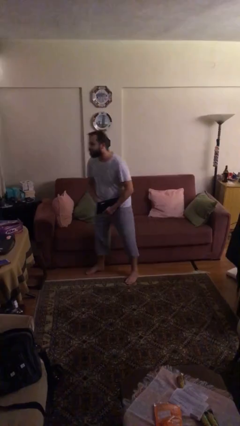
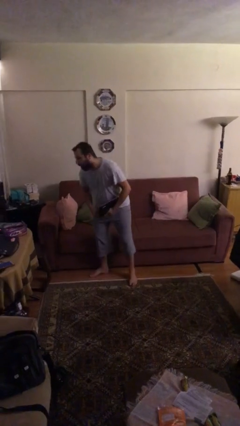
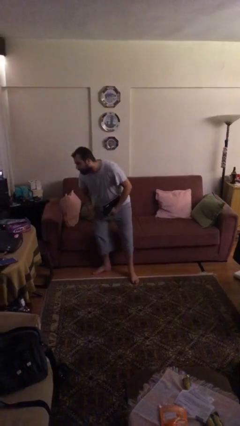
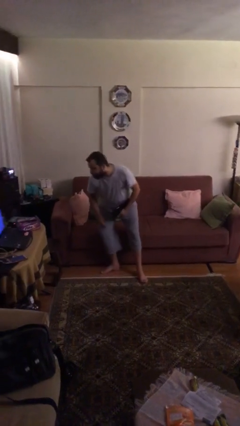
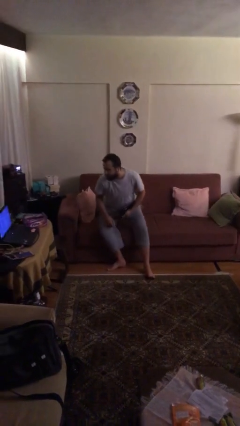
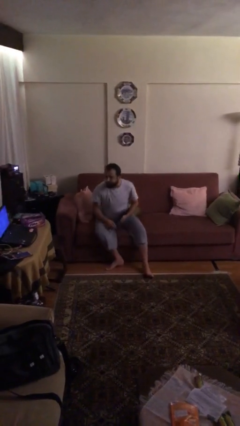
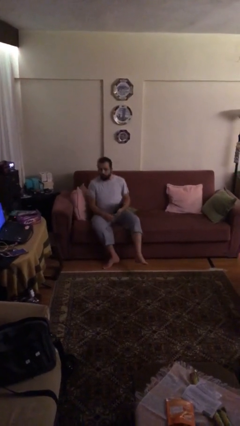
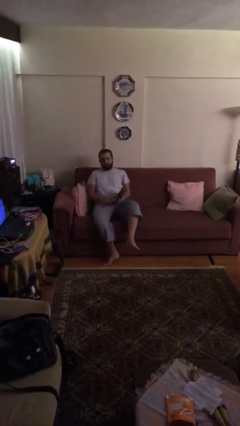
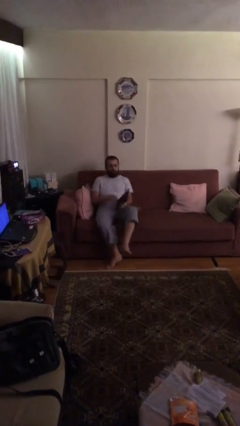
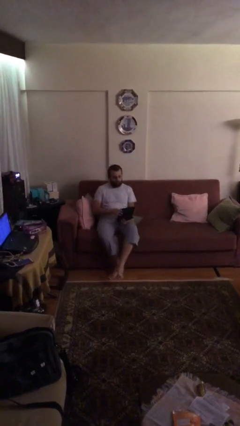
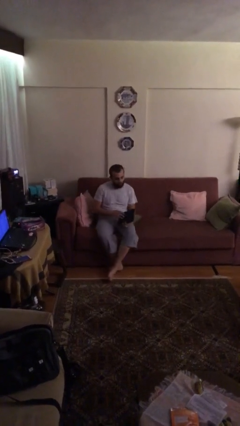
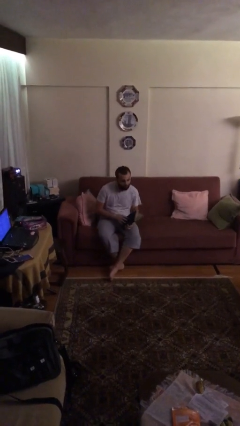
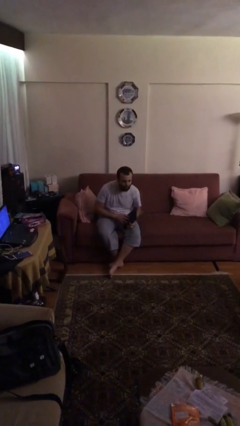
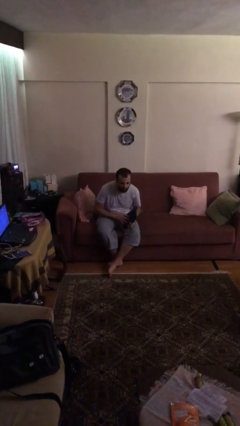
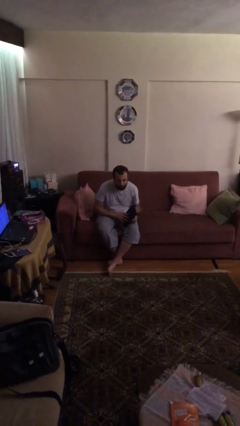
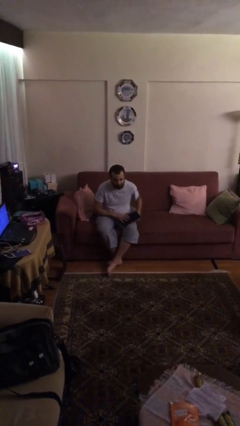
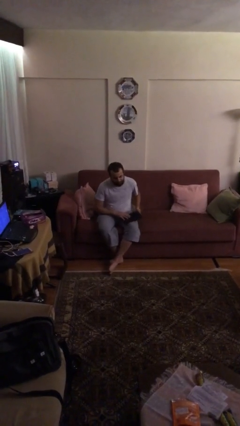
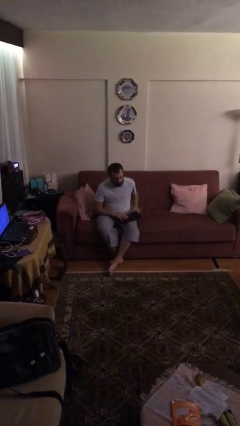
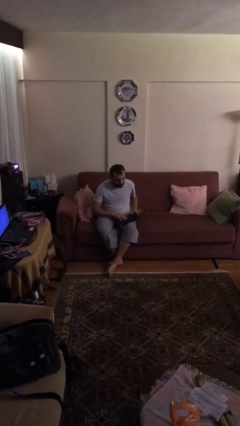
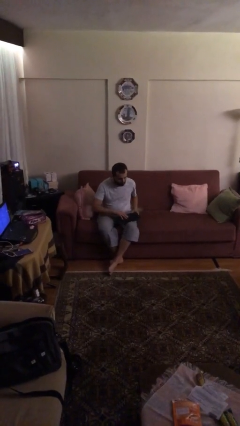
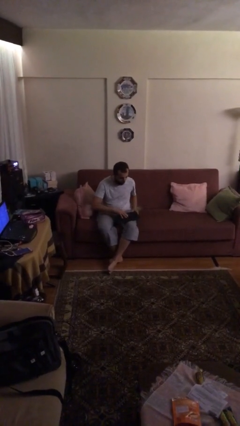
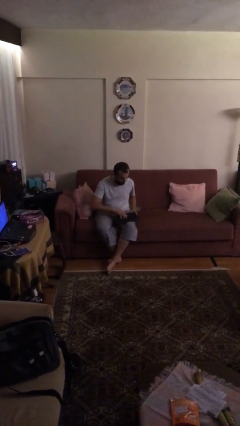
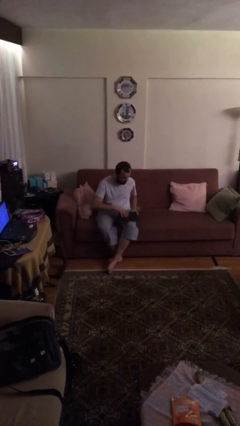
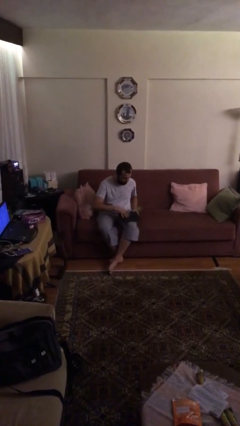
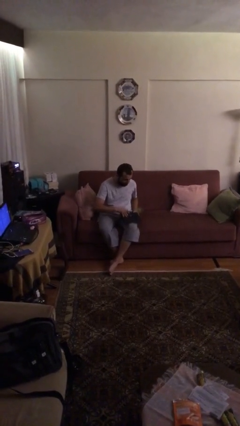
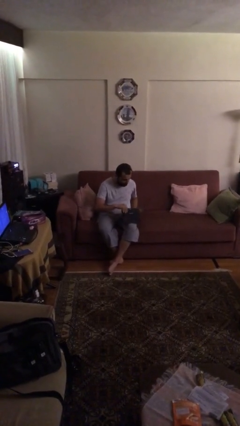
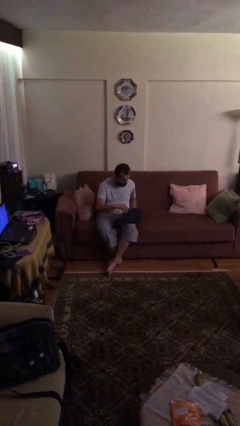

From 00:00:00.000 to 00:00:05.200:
person sits down

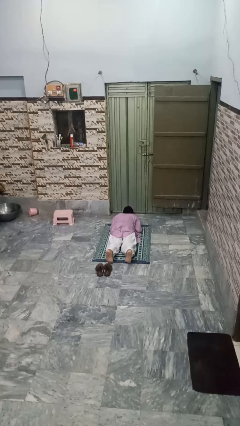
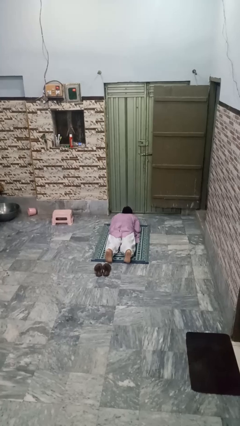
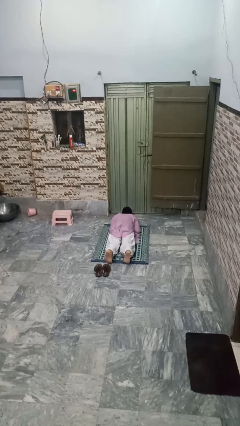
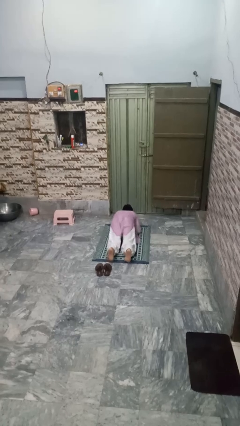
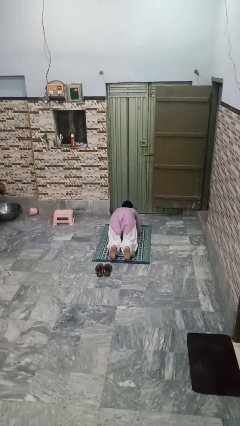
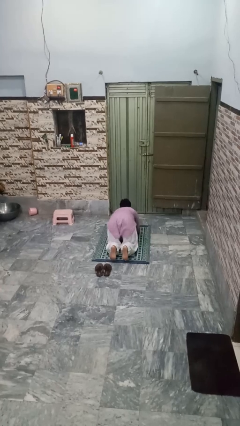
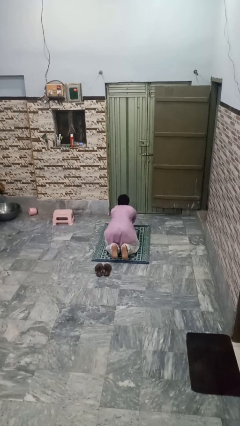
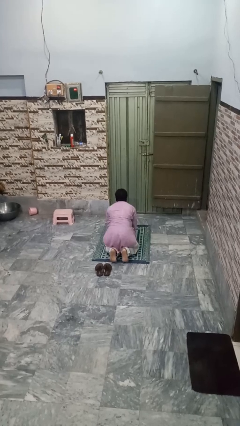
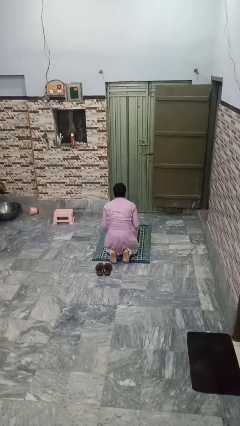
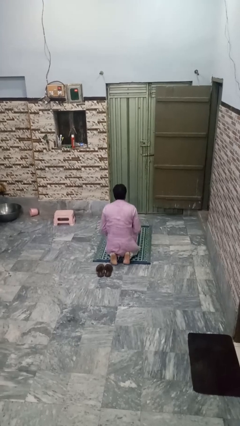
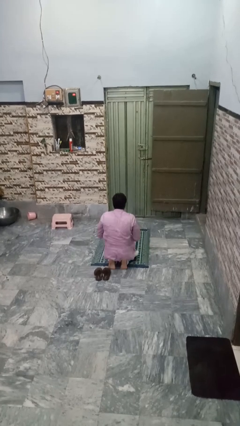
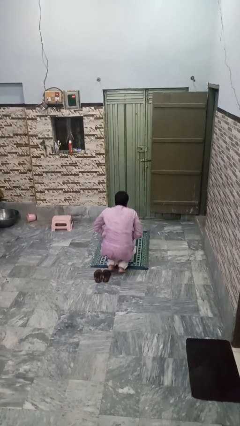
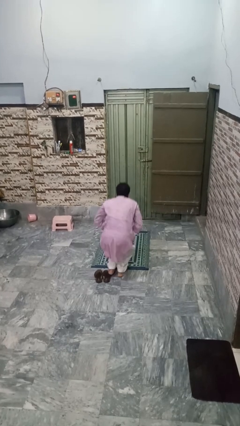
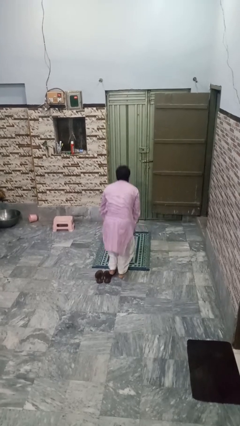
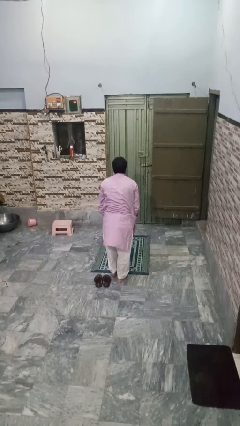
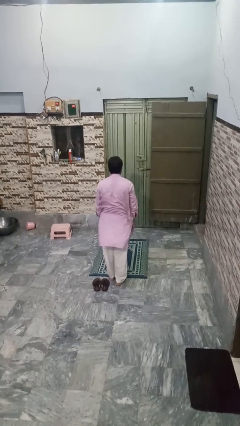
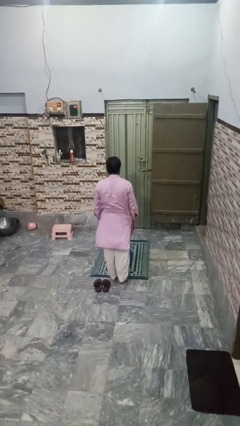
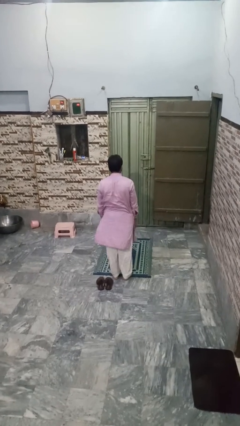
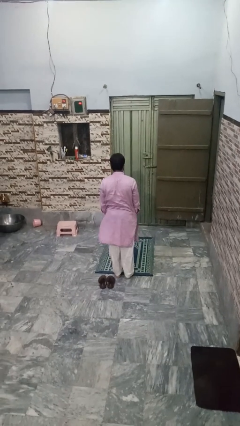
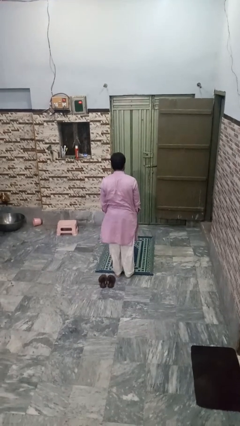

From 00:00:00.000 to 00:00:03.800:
person stands up from floor

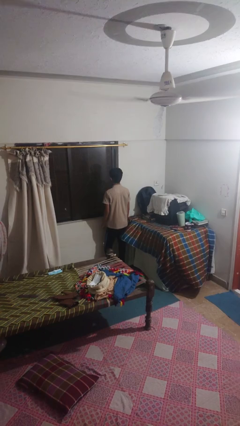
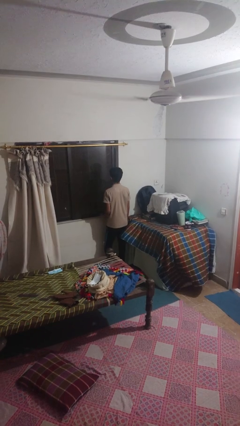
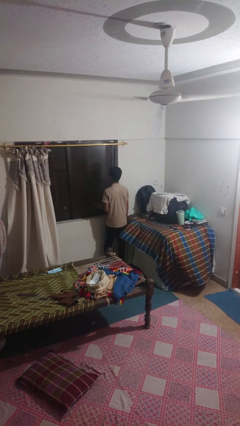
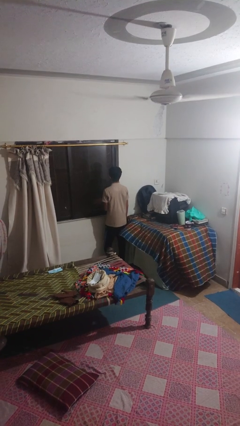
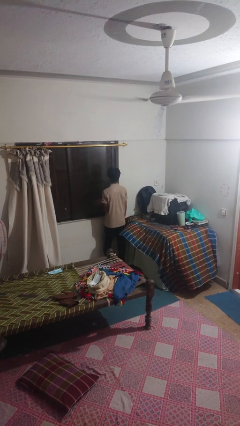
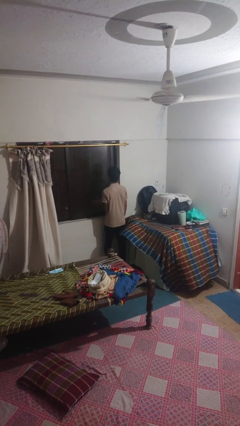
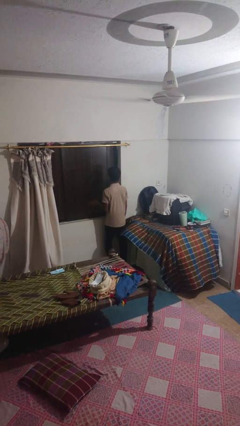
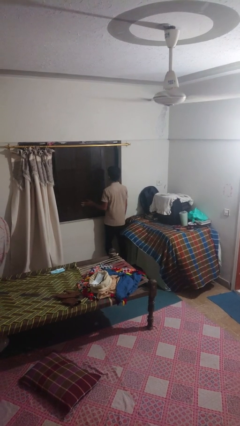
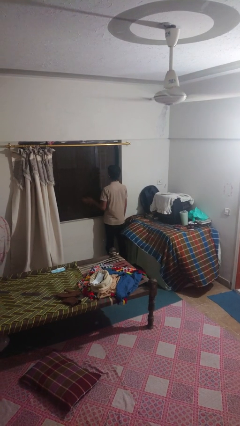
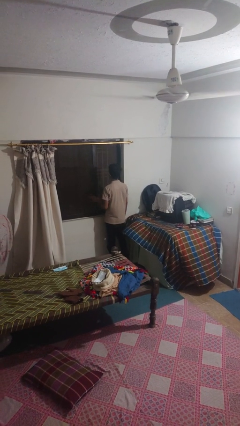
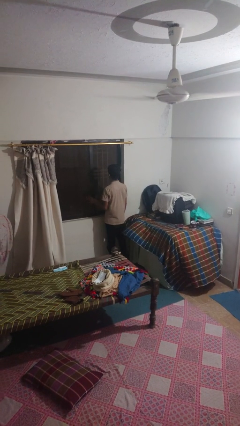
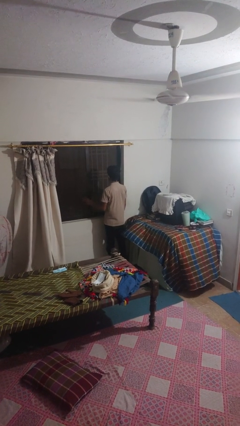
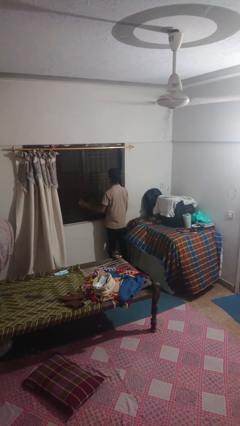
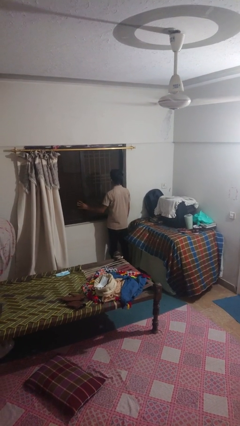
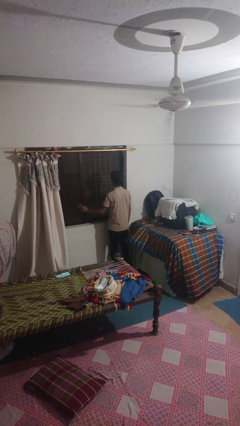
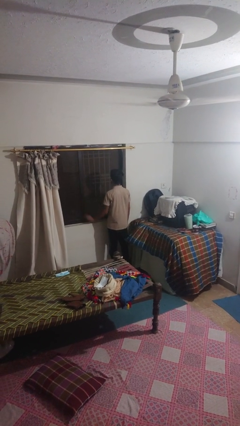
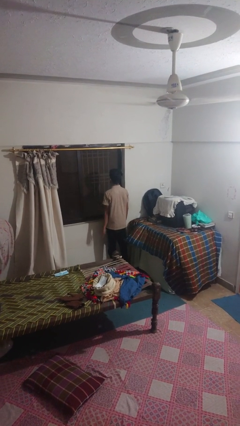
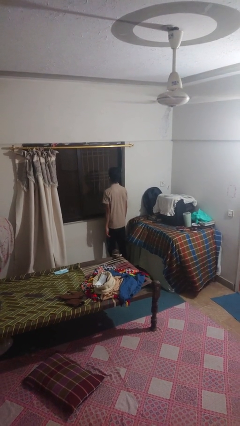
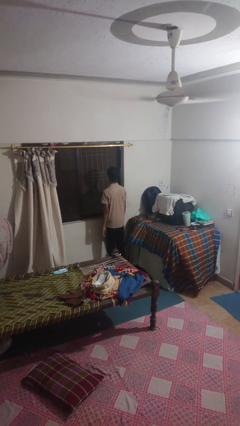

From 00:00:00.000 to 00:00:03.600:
person opens sliding door

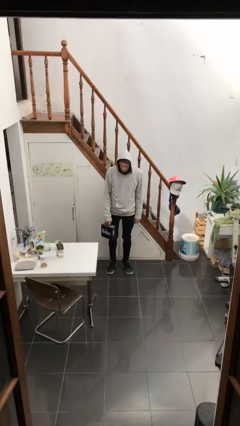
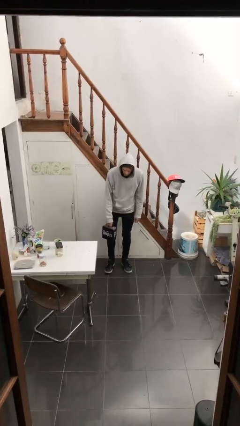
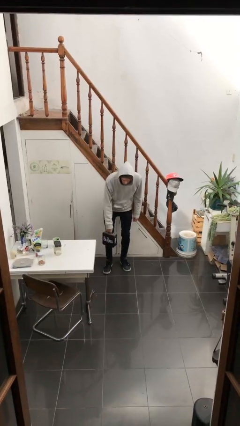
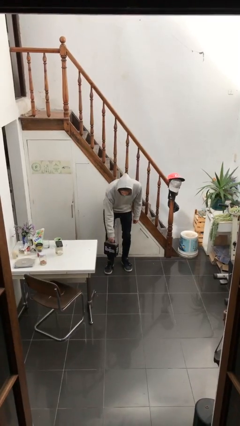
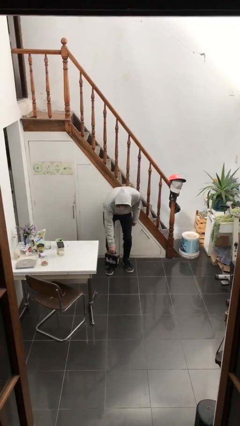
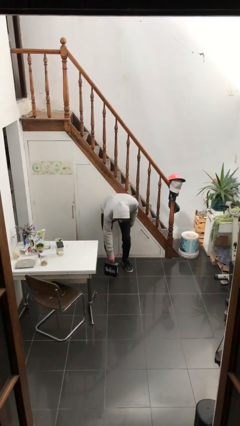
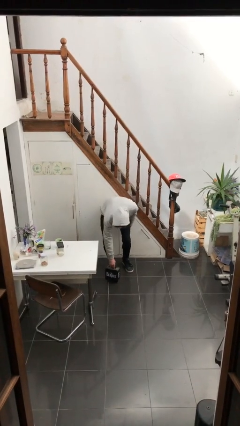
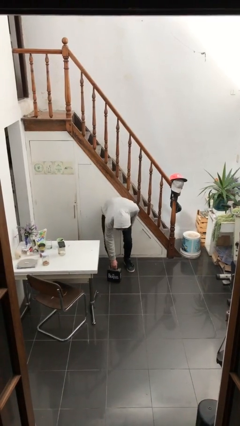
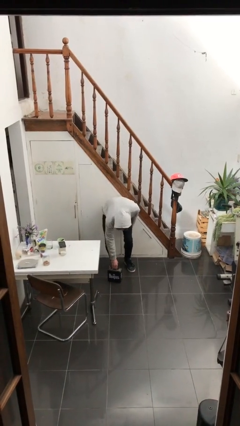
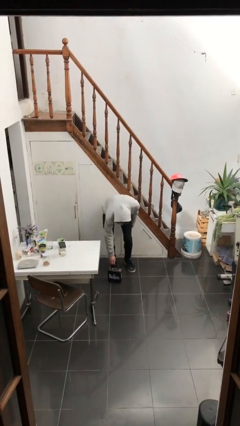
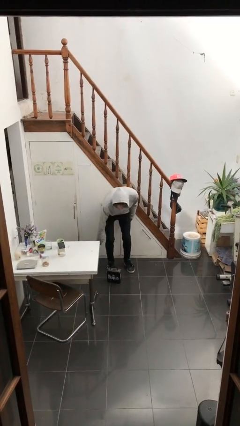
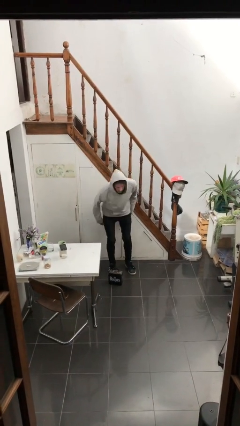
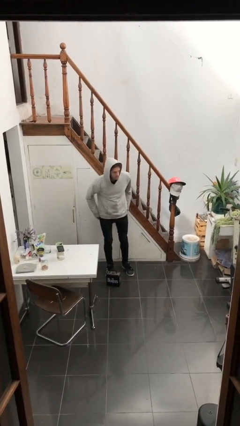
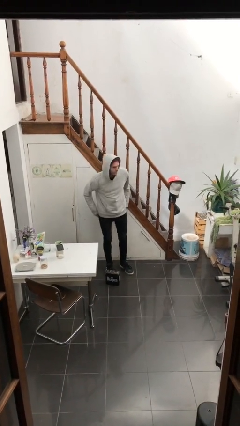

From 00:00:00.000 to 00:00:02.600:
person puts down object on floor

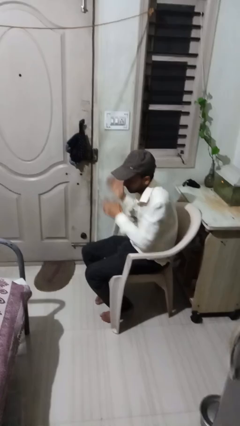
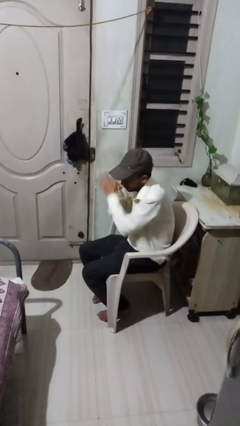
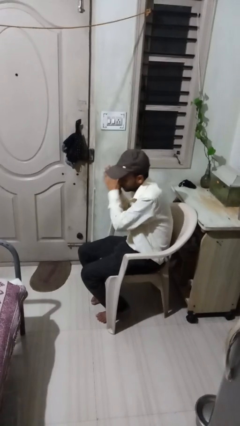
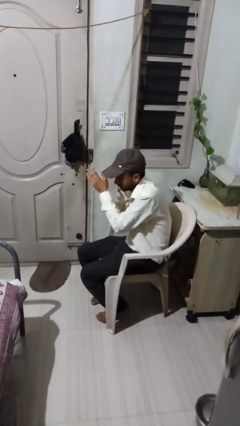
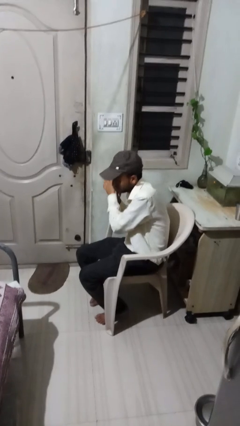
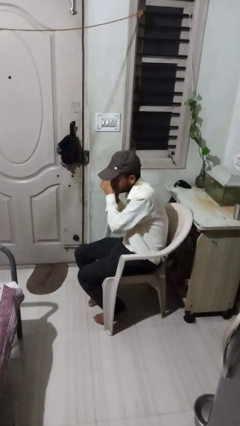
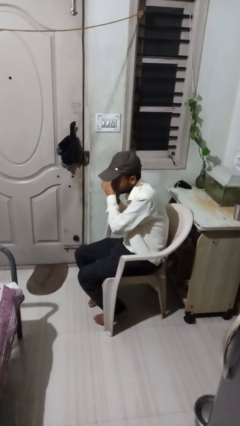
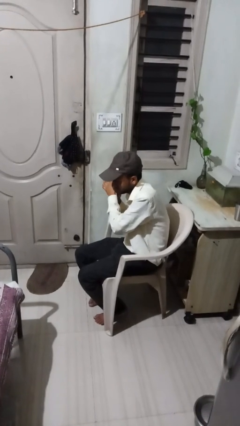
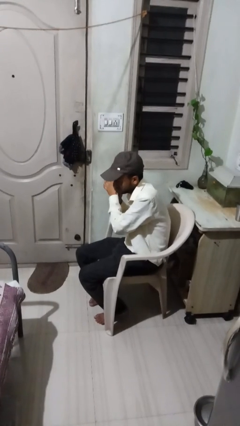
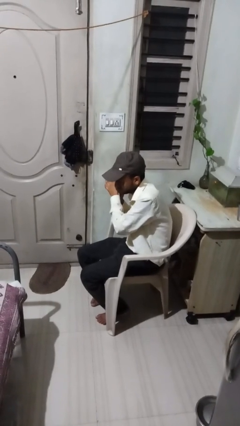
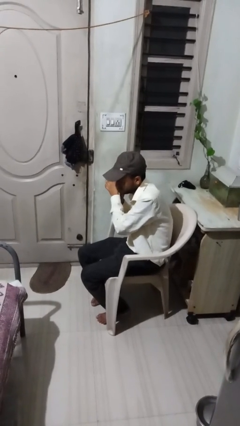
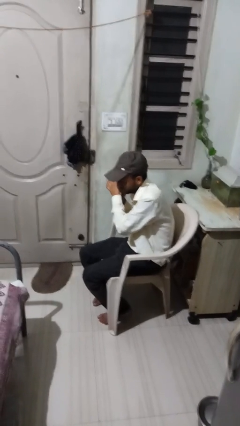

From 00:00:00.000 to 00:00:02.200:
person claps hands

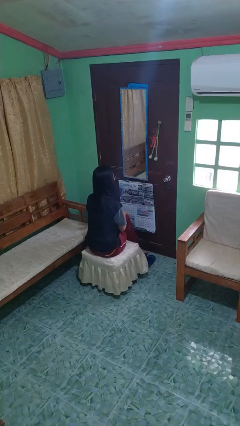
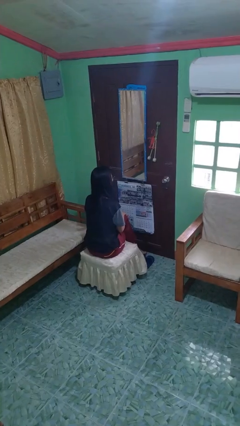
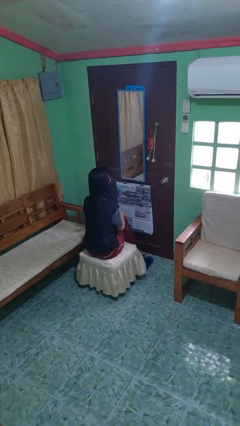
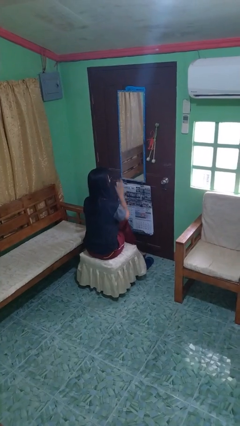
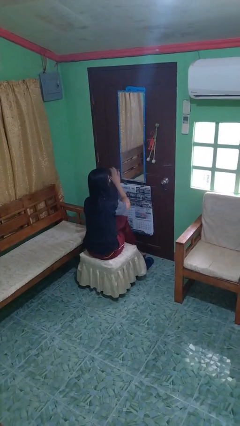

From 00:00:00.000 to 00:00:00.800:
person gestures swipe left
